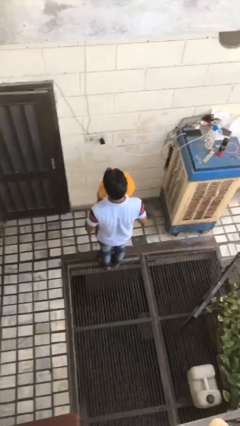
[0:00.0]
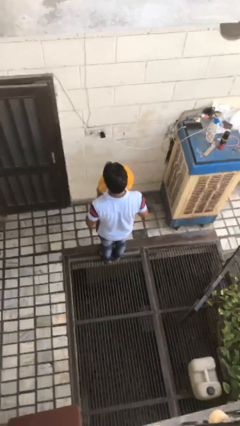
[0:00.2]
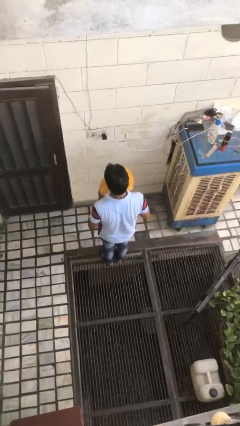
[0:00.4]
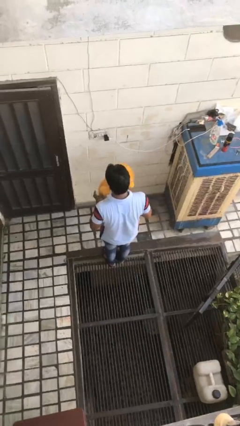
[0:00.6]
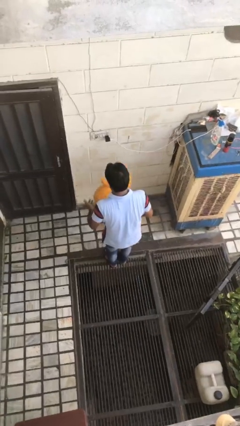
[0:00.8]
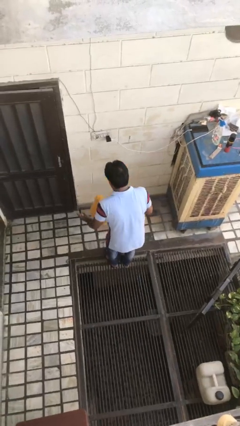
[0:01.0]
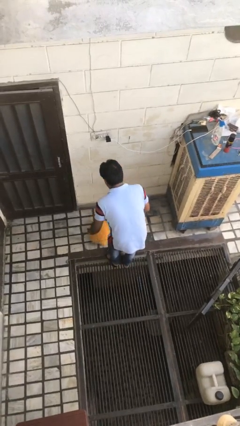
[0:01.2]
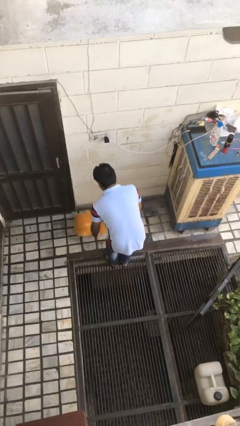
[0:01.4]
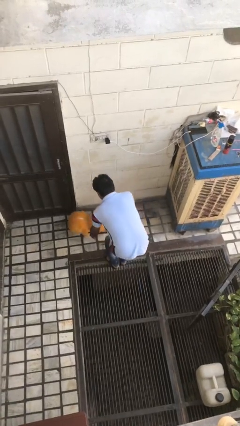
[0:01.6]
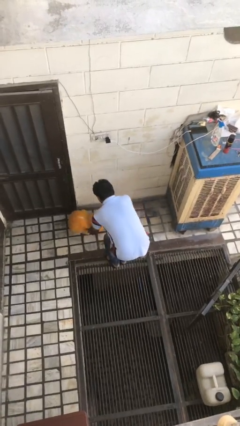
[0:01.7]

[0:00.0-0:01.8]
person throws object to ground

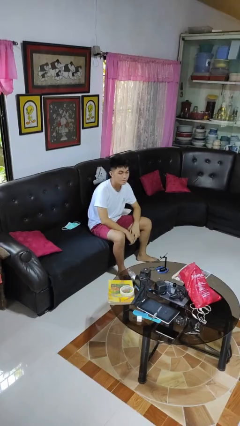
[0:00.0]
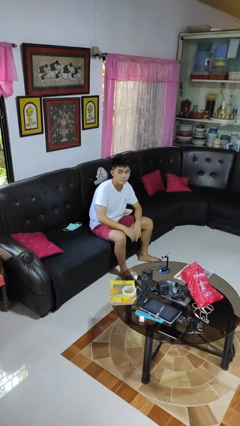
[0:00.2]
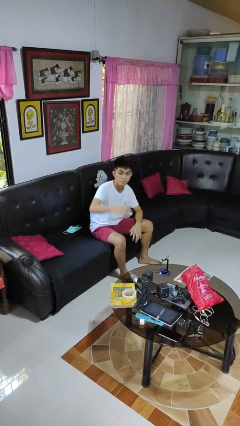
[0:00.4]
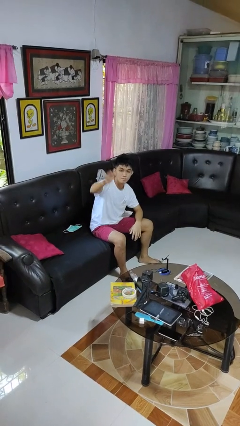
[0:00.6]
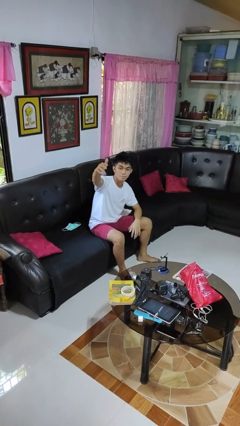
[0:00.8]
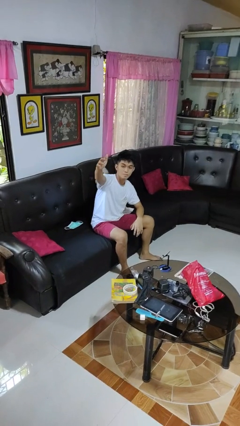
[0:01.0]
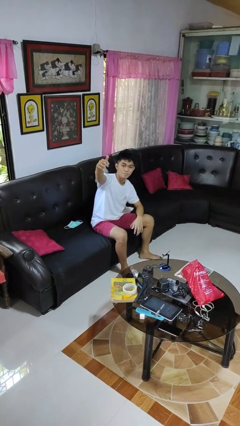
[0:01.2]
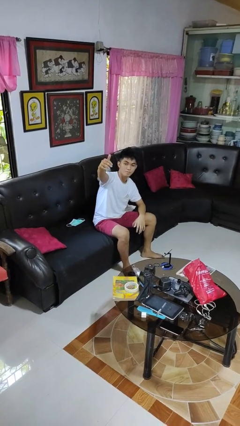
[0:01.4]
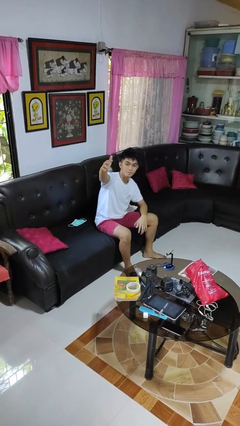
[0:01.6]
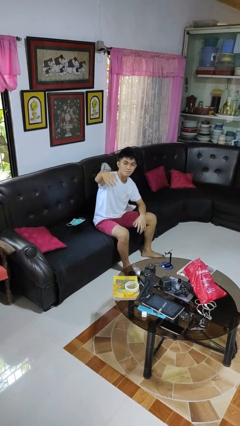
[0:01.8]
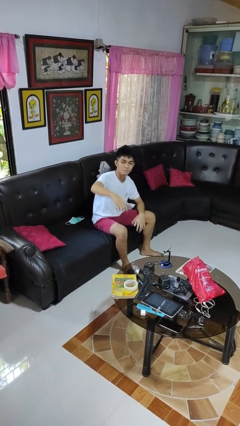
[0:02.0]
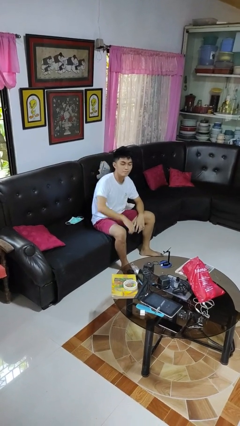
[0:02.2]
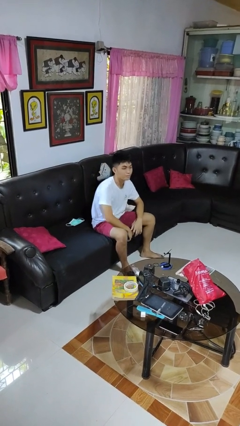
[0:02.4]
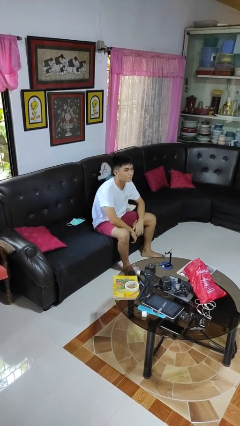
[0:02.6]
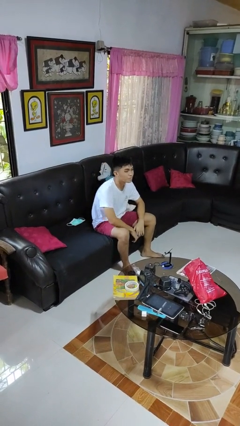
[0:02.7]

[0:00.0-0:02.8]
person gestures come here

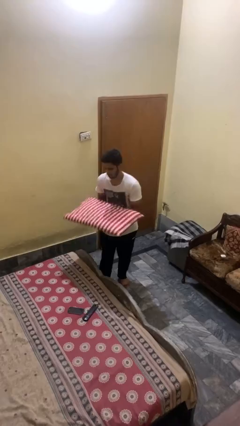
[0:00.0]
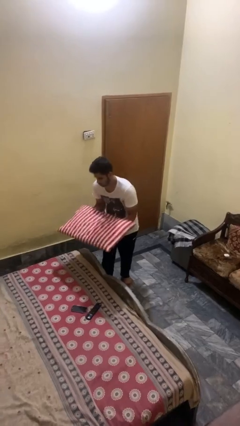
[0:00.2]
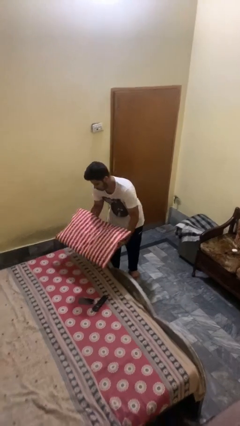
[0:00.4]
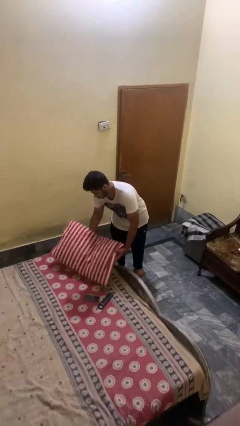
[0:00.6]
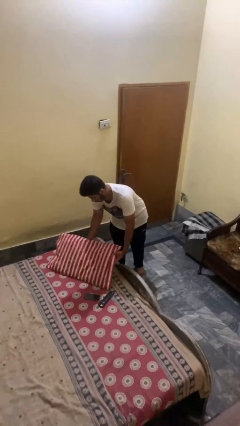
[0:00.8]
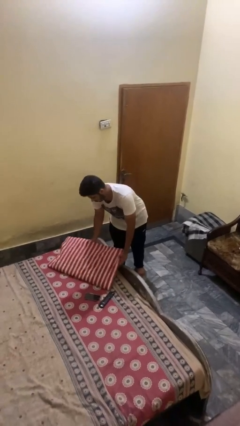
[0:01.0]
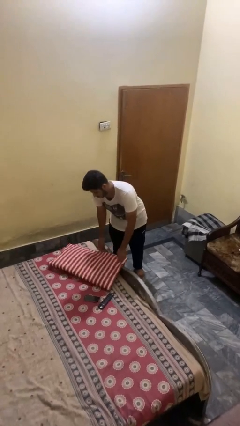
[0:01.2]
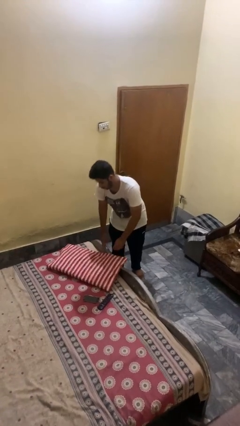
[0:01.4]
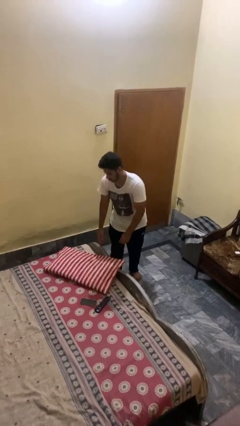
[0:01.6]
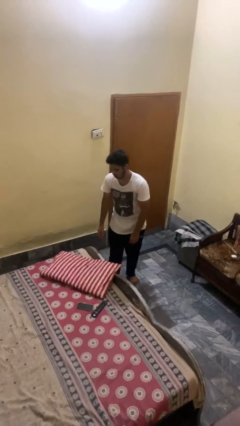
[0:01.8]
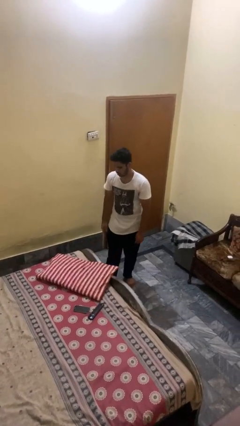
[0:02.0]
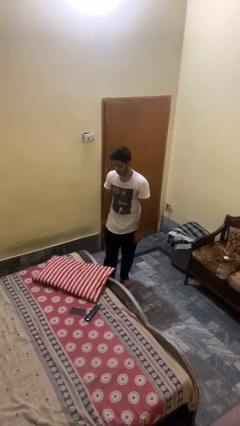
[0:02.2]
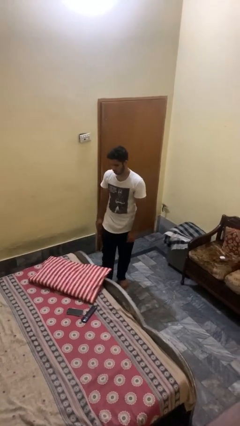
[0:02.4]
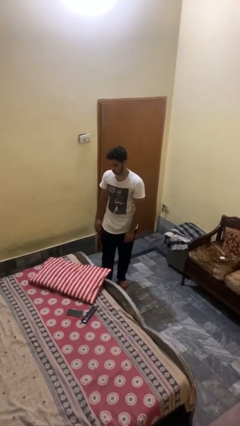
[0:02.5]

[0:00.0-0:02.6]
person puts down object on bed

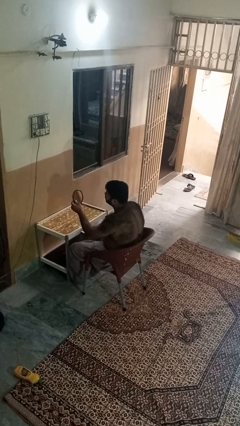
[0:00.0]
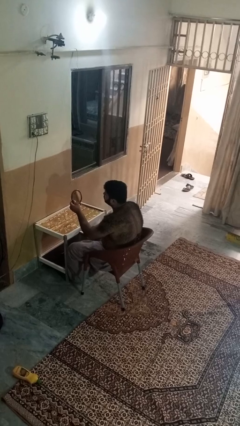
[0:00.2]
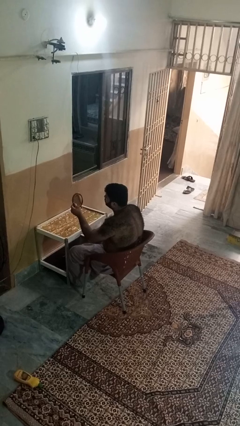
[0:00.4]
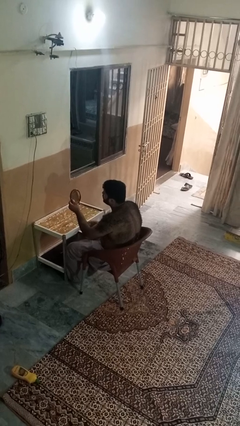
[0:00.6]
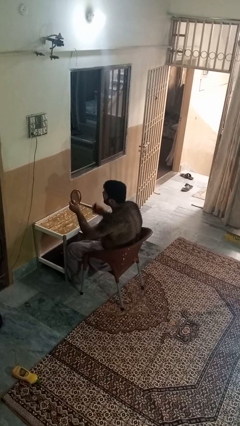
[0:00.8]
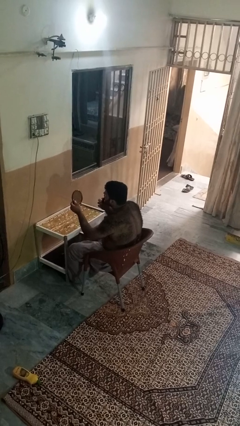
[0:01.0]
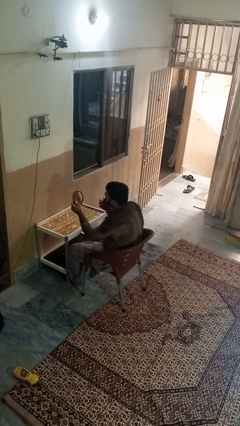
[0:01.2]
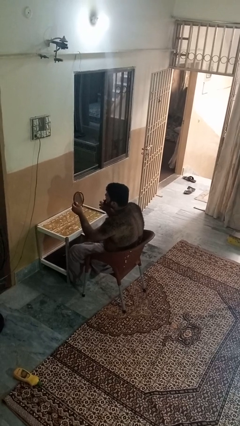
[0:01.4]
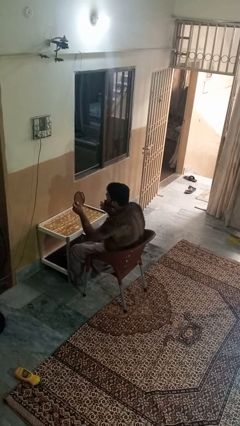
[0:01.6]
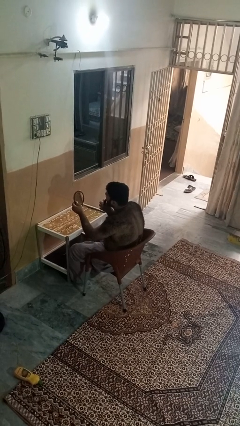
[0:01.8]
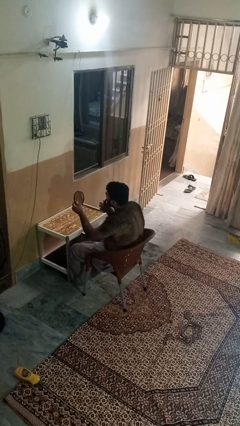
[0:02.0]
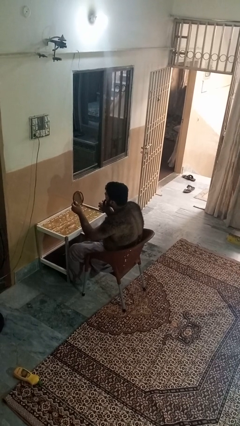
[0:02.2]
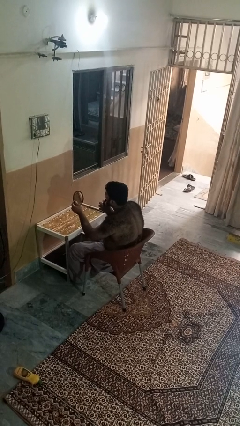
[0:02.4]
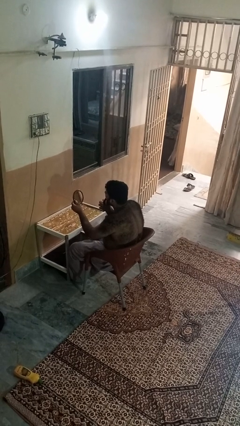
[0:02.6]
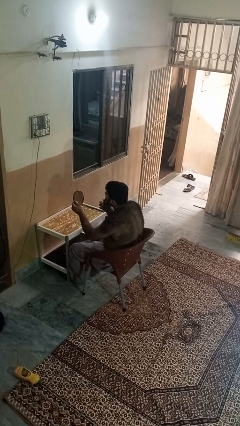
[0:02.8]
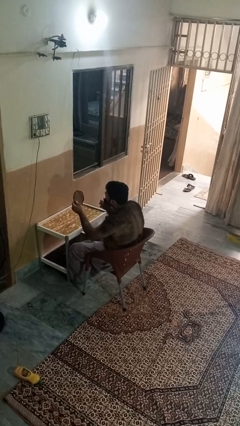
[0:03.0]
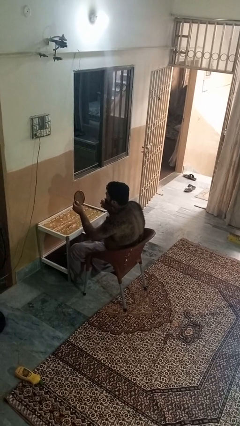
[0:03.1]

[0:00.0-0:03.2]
person applies lip makeup

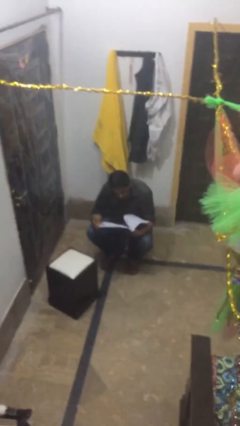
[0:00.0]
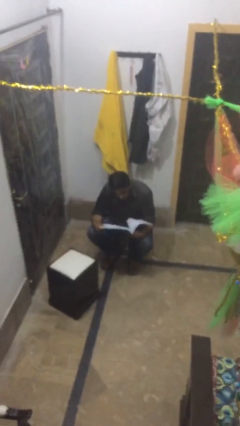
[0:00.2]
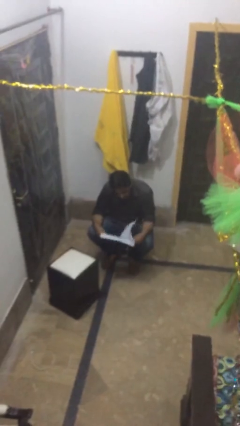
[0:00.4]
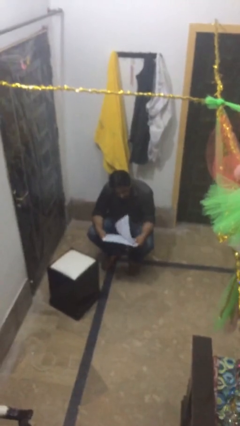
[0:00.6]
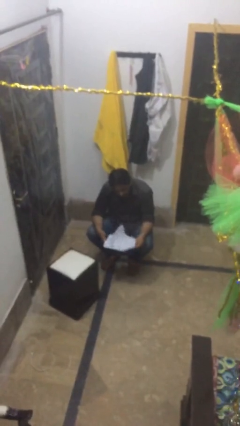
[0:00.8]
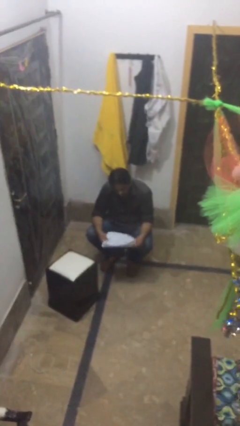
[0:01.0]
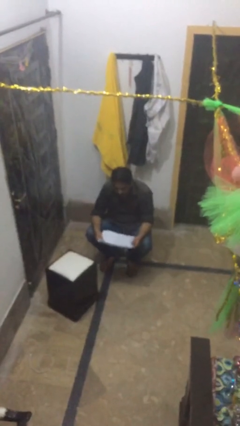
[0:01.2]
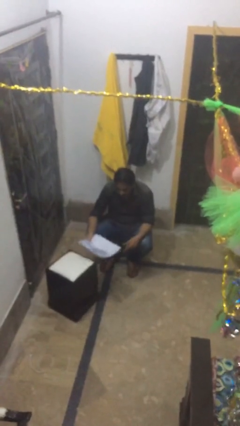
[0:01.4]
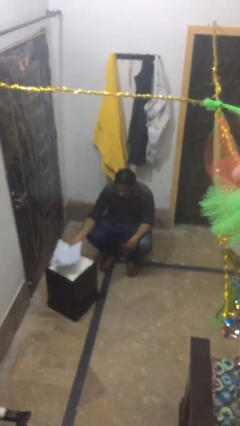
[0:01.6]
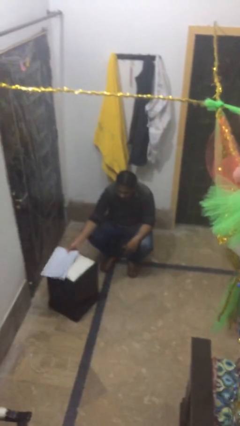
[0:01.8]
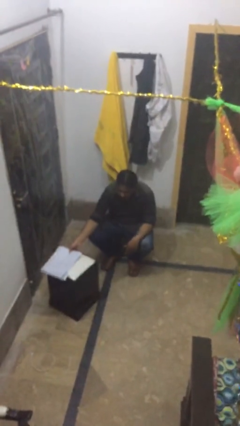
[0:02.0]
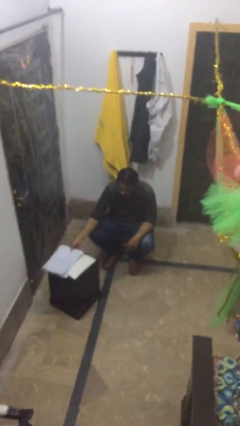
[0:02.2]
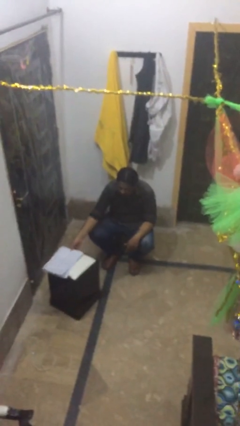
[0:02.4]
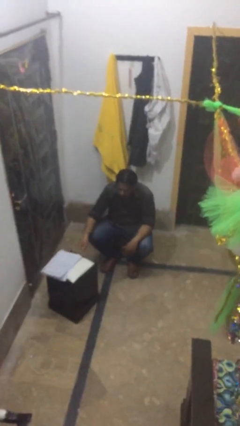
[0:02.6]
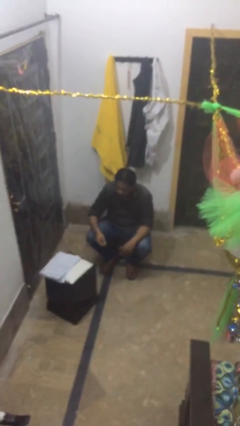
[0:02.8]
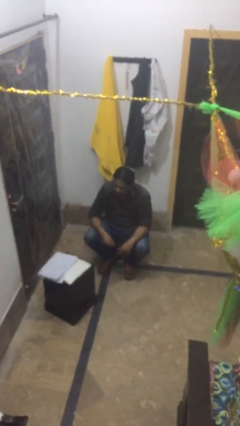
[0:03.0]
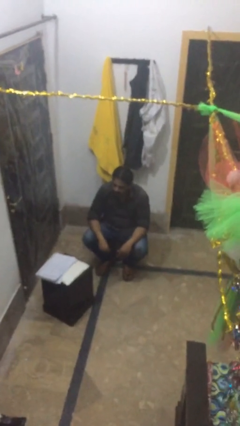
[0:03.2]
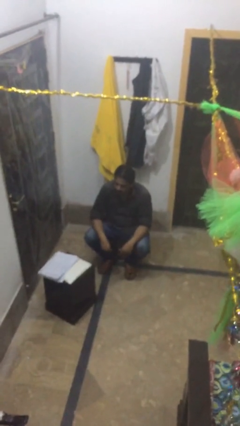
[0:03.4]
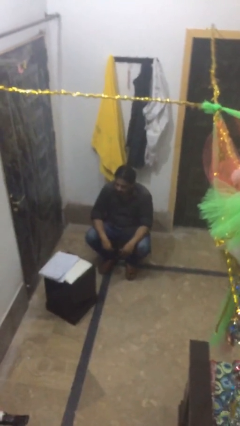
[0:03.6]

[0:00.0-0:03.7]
person puts down object on table

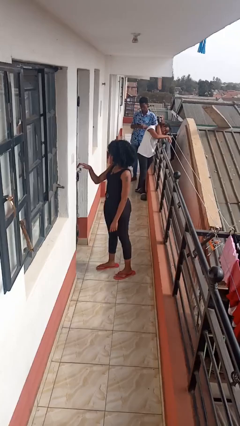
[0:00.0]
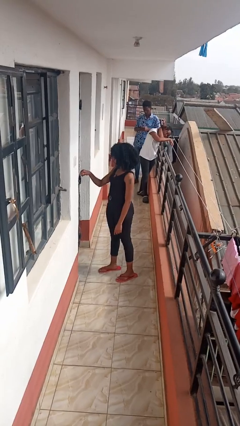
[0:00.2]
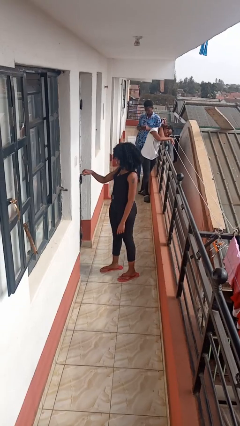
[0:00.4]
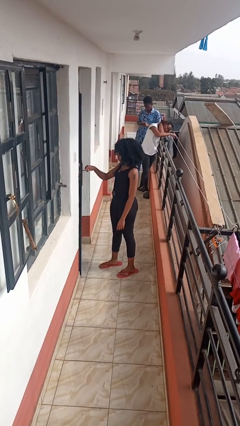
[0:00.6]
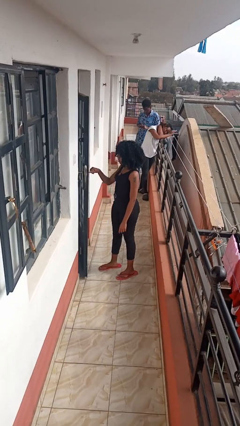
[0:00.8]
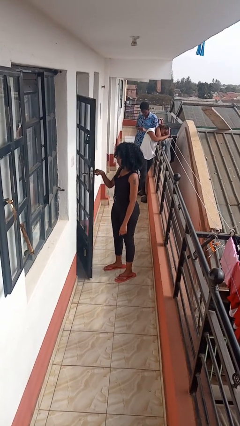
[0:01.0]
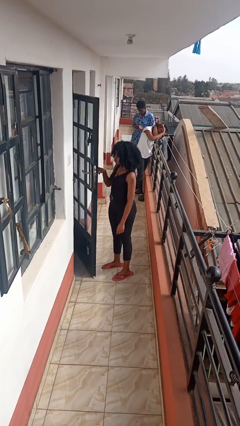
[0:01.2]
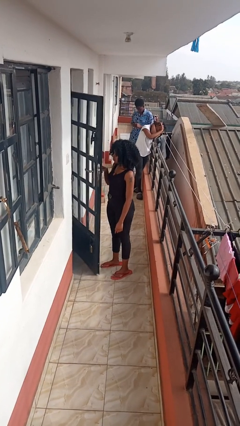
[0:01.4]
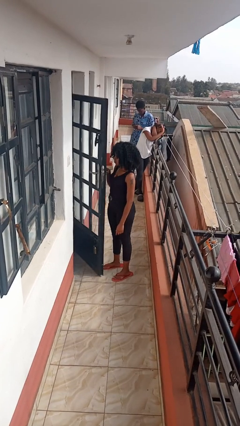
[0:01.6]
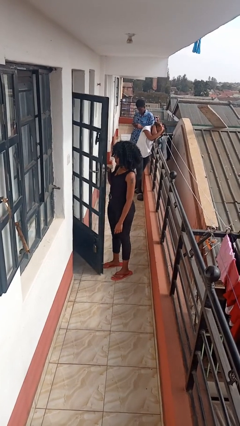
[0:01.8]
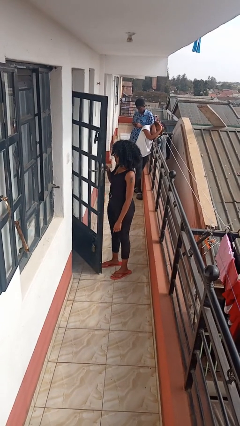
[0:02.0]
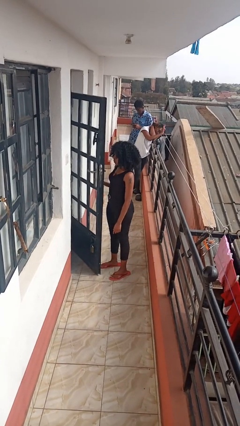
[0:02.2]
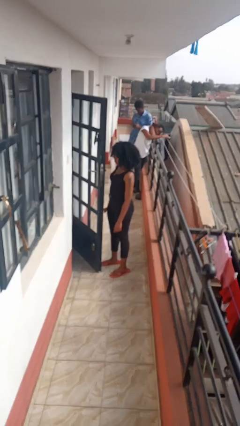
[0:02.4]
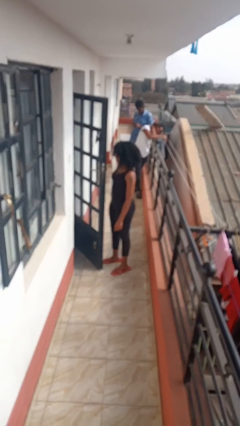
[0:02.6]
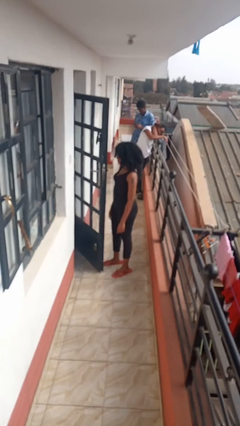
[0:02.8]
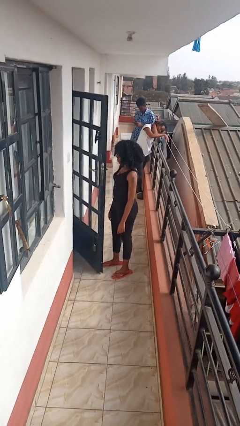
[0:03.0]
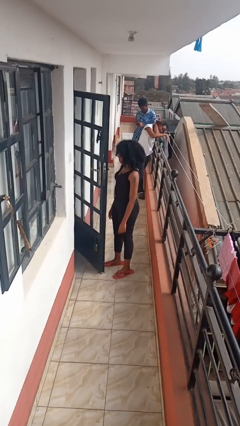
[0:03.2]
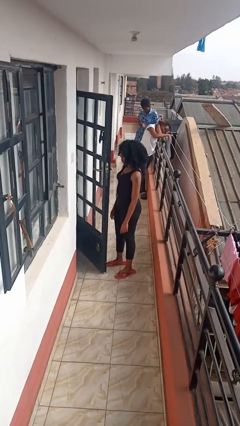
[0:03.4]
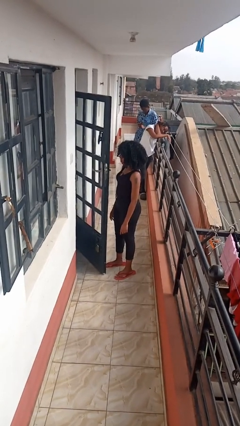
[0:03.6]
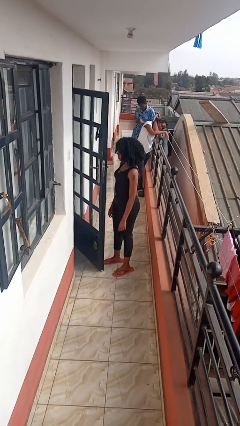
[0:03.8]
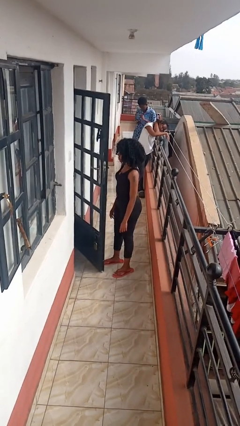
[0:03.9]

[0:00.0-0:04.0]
person opens facility door
